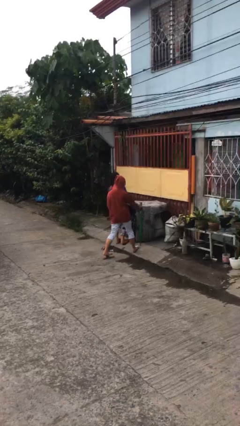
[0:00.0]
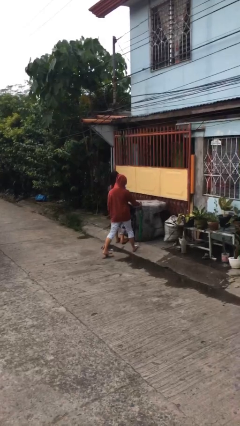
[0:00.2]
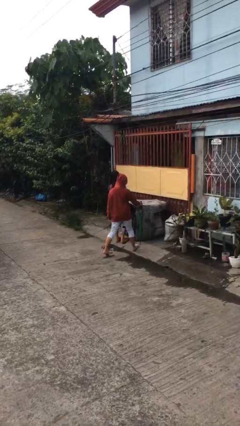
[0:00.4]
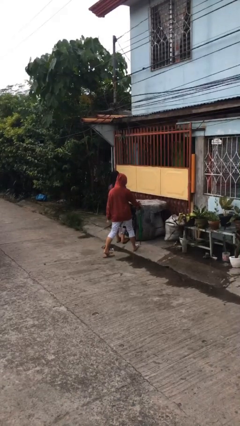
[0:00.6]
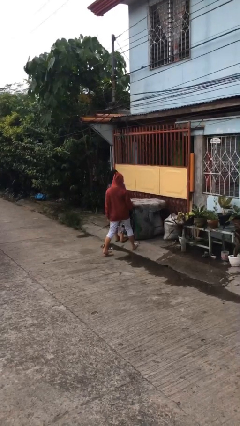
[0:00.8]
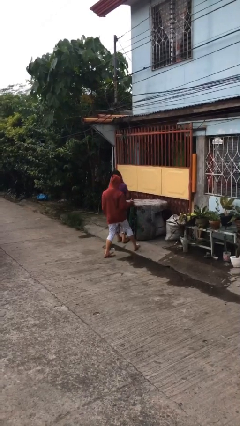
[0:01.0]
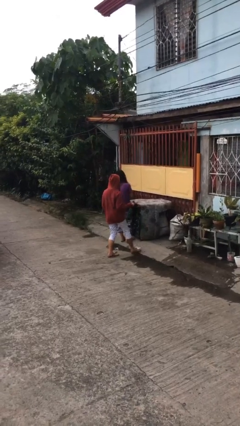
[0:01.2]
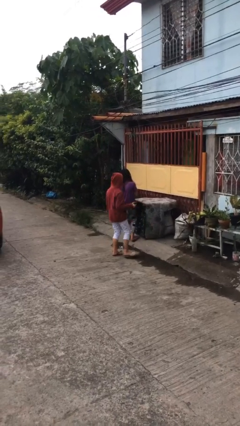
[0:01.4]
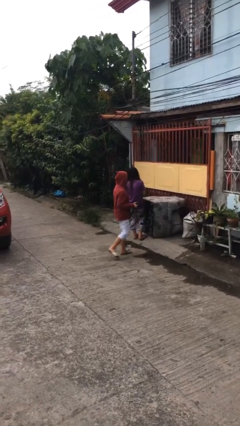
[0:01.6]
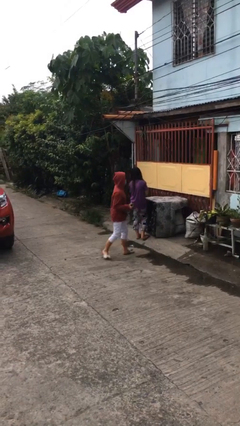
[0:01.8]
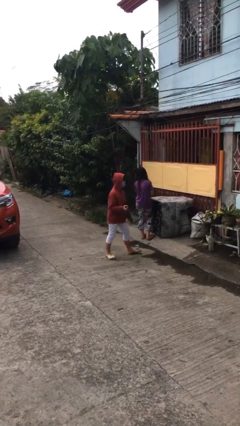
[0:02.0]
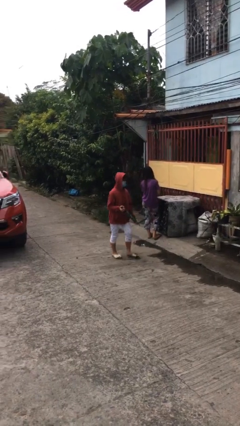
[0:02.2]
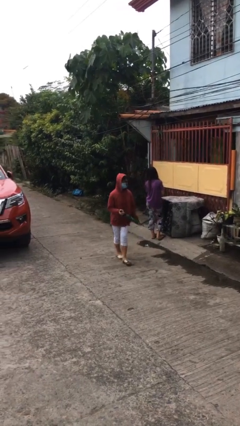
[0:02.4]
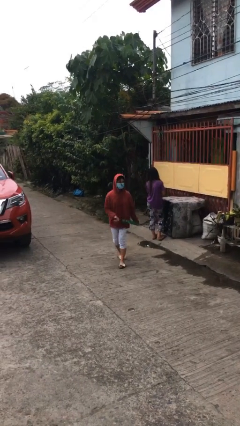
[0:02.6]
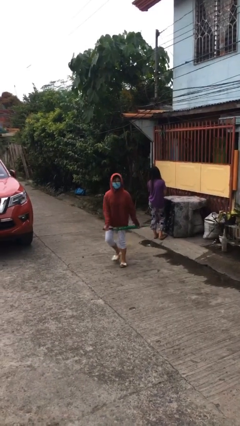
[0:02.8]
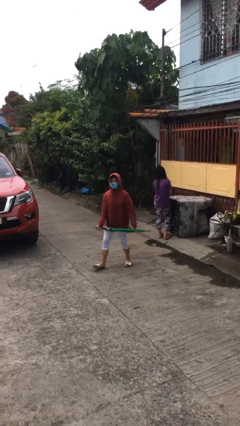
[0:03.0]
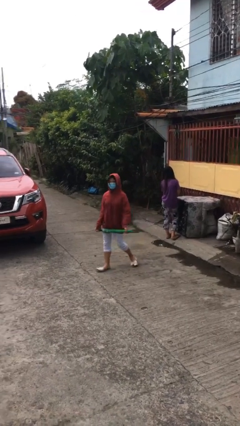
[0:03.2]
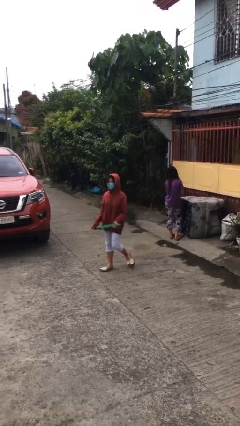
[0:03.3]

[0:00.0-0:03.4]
person steals object from person

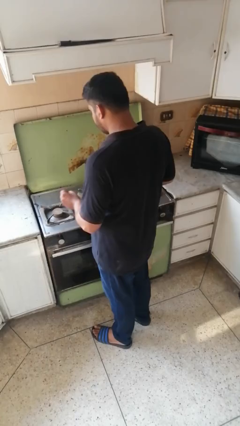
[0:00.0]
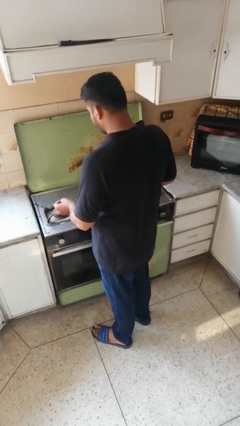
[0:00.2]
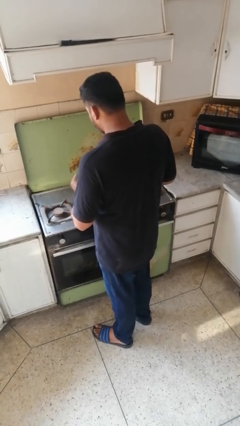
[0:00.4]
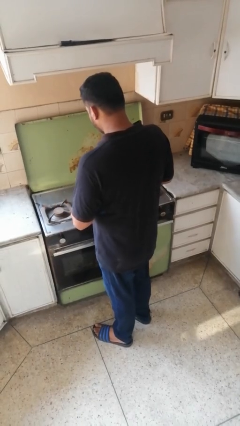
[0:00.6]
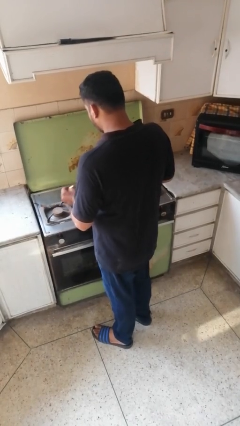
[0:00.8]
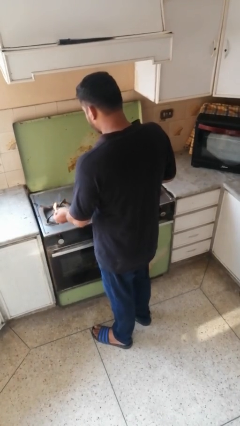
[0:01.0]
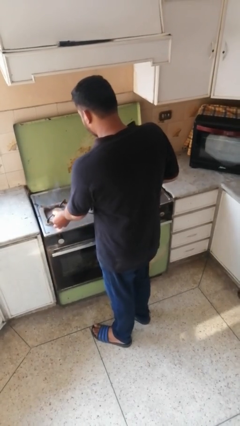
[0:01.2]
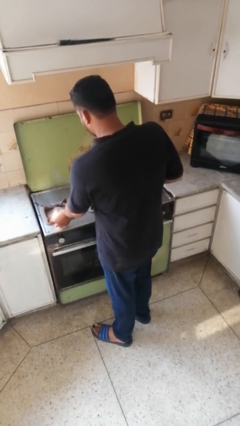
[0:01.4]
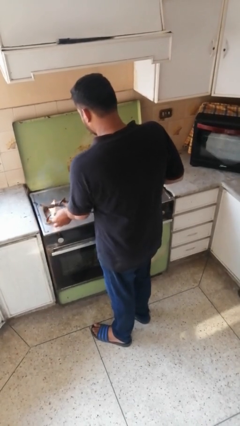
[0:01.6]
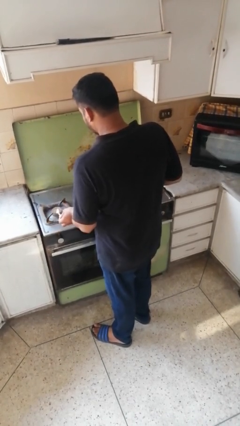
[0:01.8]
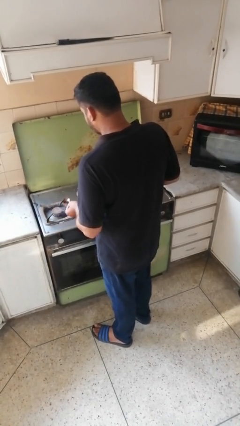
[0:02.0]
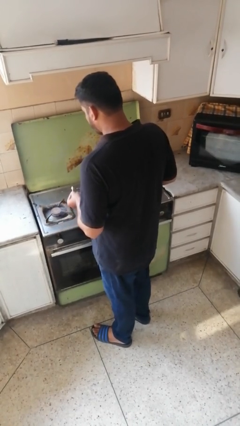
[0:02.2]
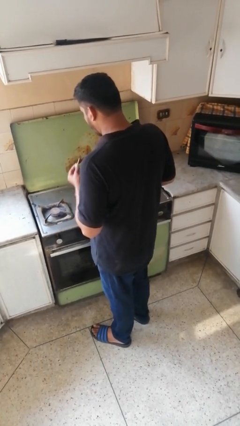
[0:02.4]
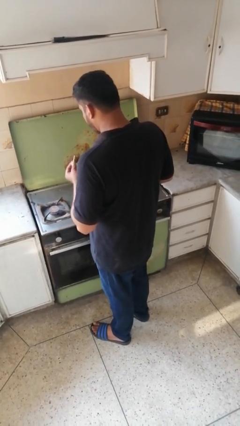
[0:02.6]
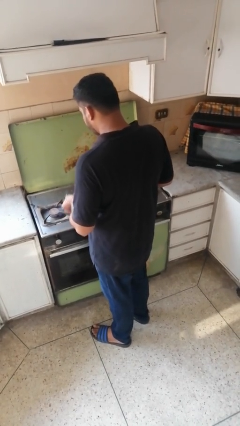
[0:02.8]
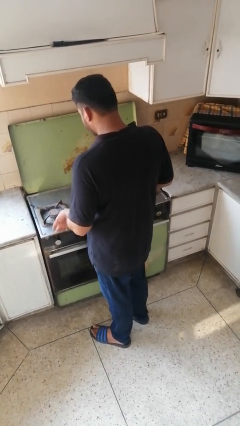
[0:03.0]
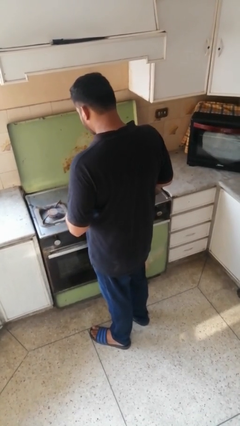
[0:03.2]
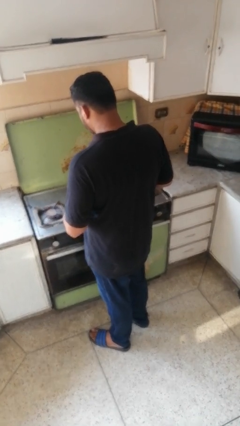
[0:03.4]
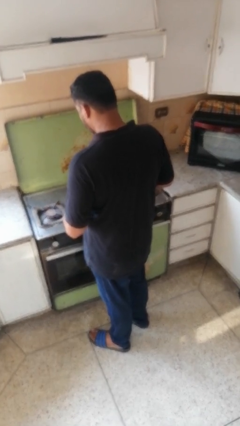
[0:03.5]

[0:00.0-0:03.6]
person turns on stovetop

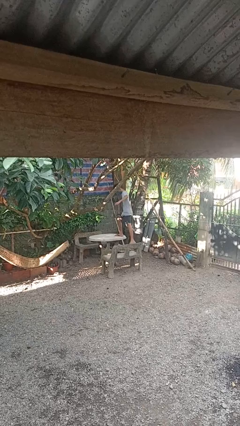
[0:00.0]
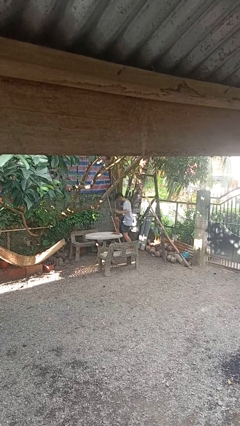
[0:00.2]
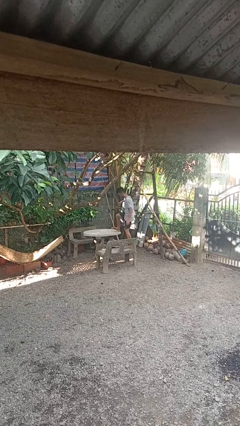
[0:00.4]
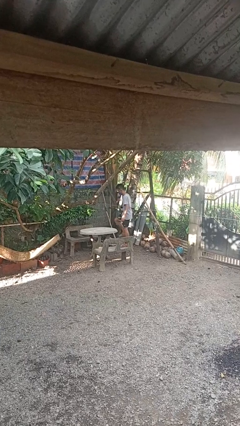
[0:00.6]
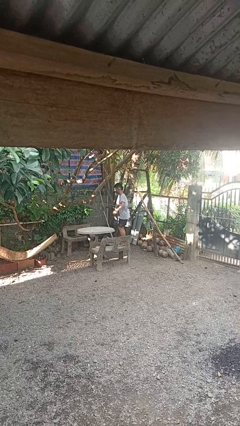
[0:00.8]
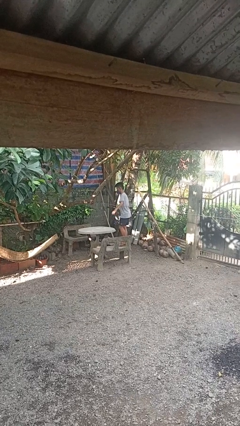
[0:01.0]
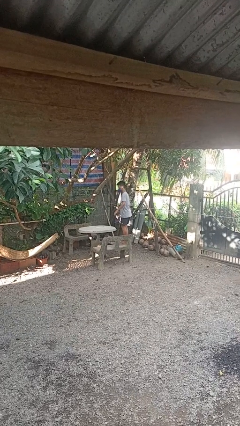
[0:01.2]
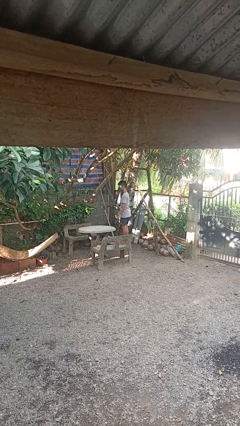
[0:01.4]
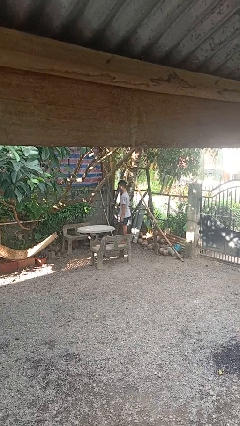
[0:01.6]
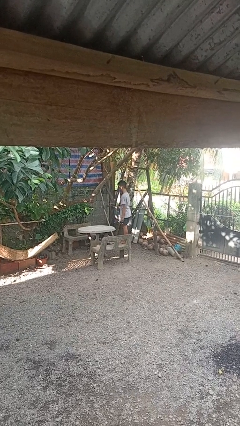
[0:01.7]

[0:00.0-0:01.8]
person climbs off table

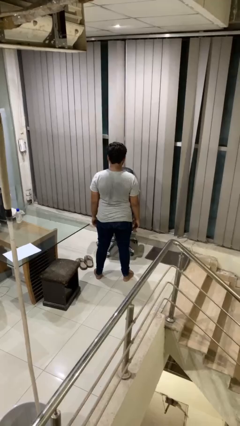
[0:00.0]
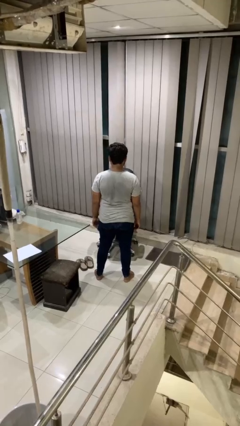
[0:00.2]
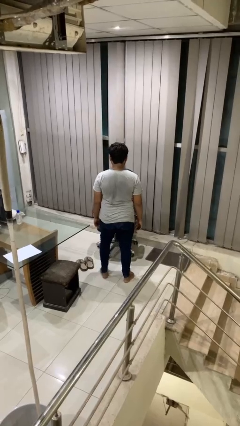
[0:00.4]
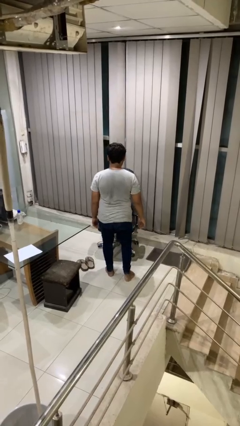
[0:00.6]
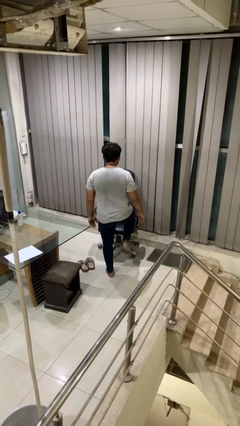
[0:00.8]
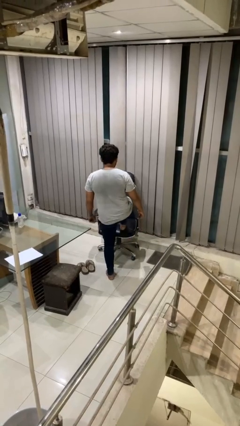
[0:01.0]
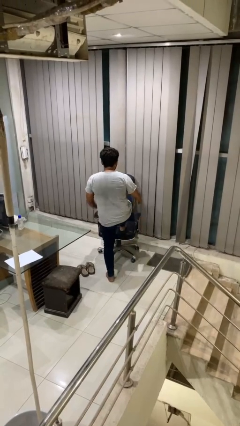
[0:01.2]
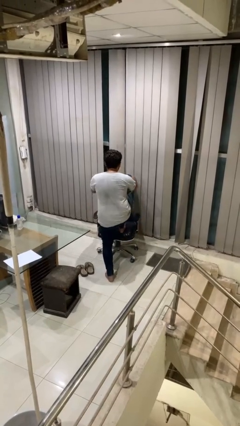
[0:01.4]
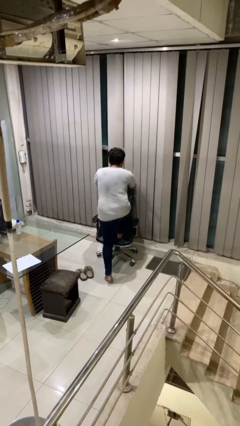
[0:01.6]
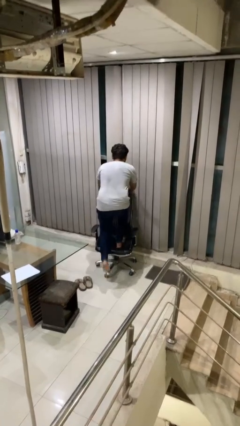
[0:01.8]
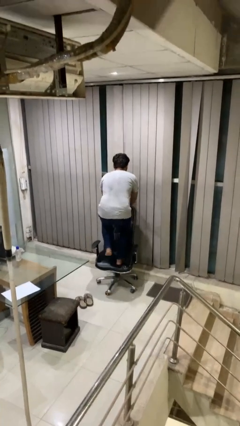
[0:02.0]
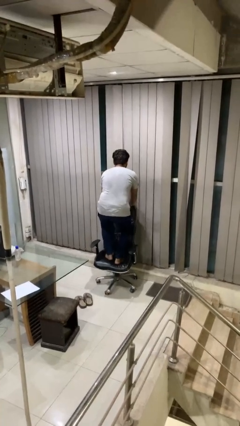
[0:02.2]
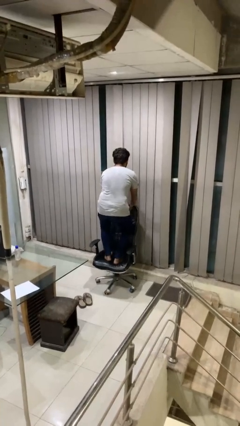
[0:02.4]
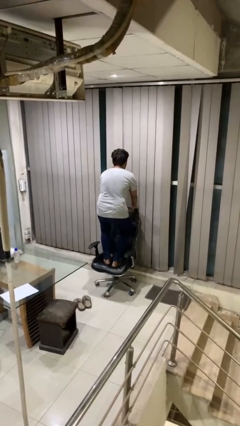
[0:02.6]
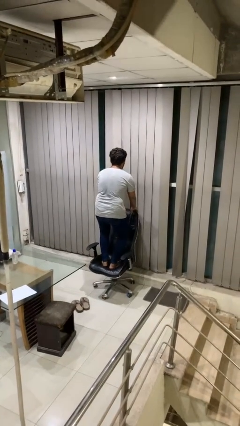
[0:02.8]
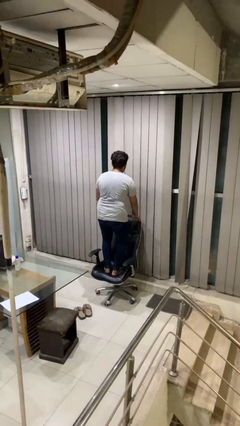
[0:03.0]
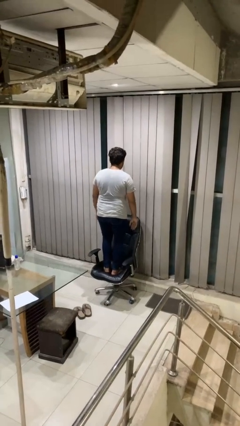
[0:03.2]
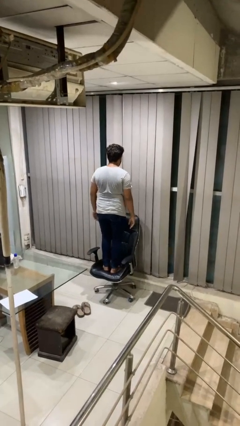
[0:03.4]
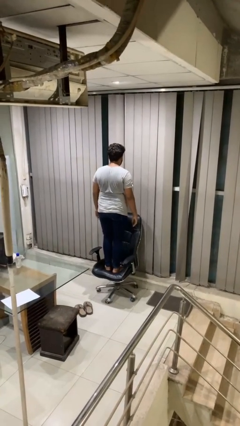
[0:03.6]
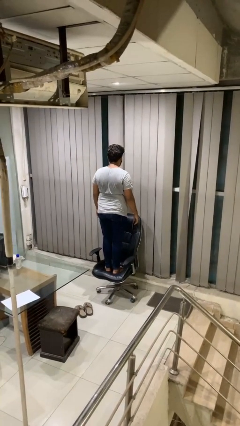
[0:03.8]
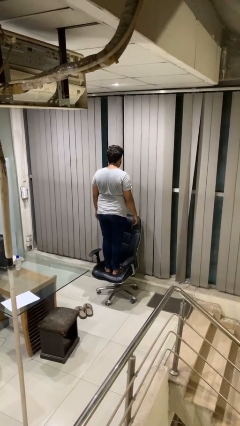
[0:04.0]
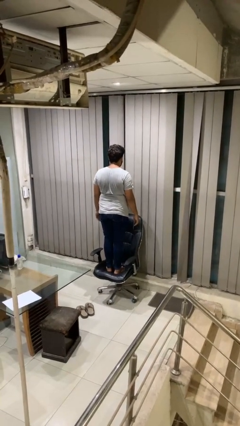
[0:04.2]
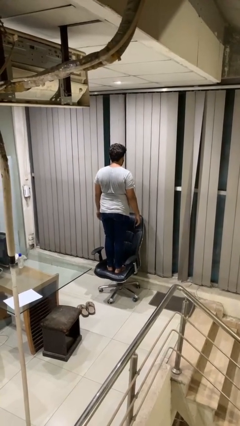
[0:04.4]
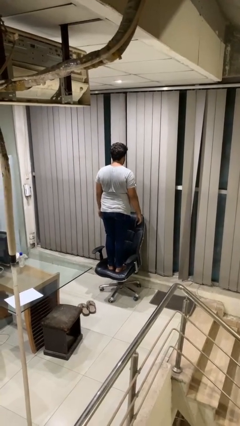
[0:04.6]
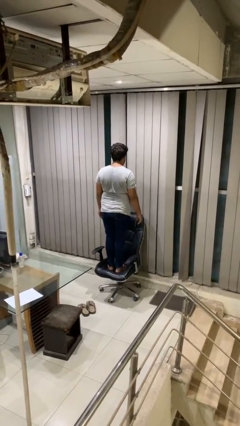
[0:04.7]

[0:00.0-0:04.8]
person climbs on chair

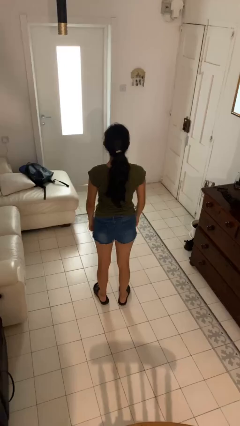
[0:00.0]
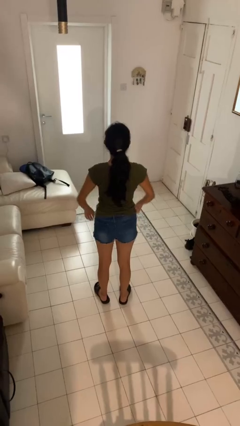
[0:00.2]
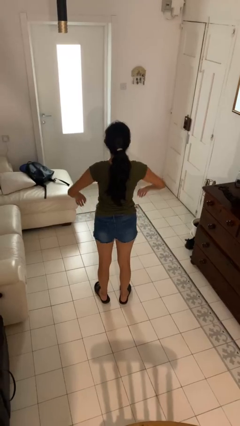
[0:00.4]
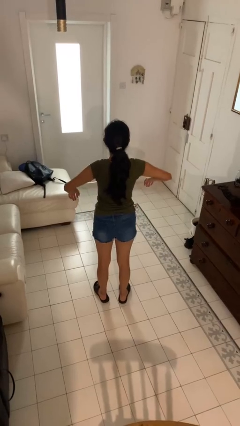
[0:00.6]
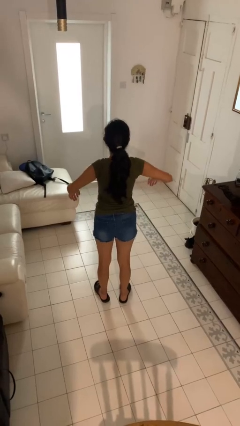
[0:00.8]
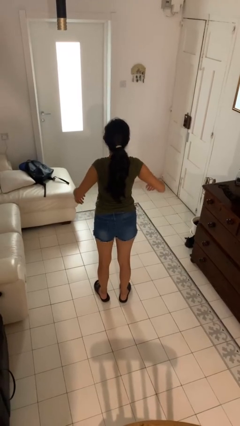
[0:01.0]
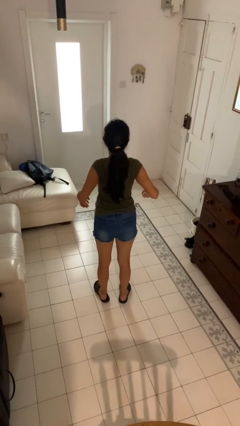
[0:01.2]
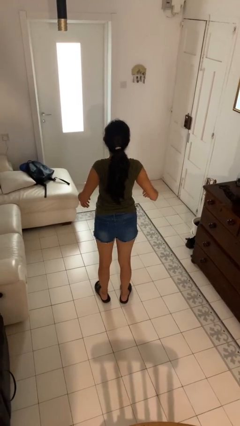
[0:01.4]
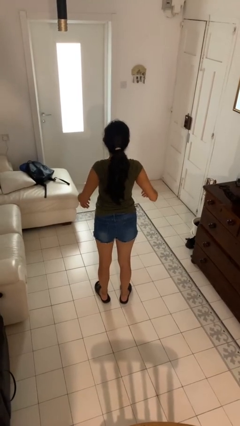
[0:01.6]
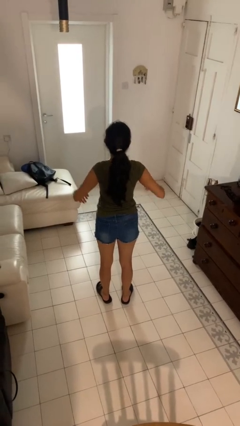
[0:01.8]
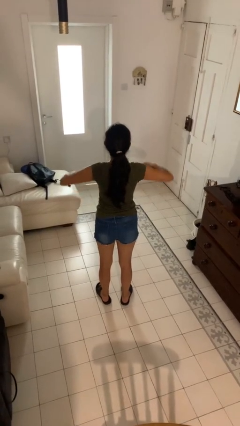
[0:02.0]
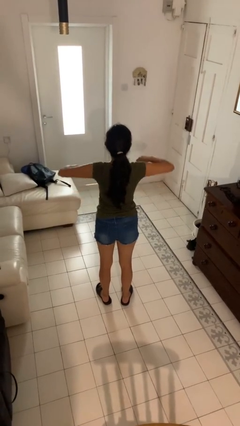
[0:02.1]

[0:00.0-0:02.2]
person stretches back

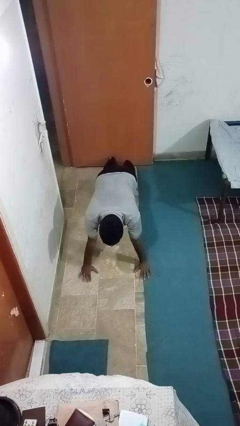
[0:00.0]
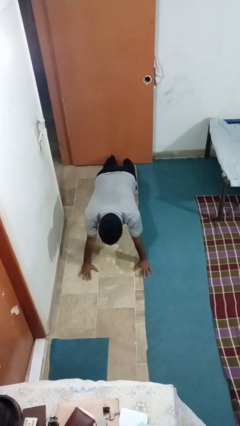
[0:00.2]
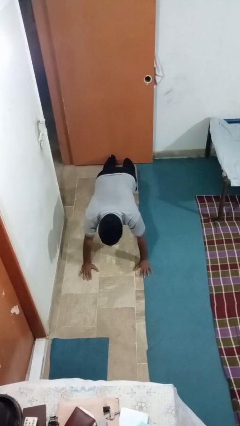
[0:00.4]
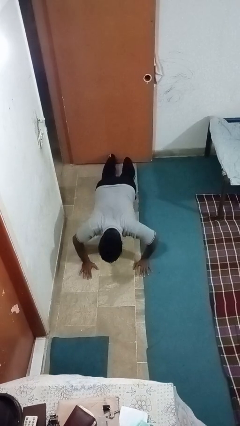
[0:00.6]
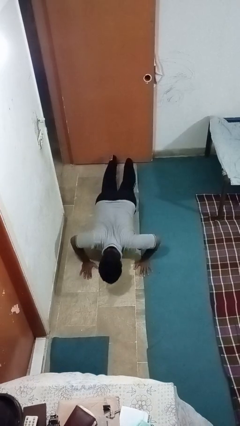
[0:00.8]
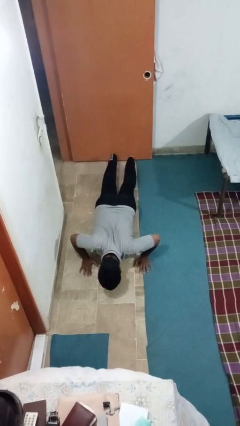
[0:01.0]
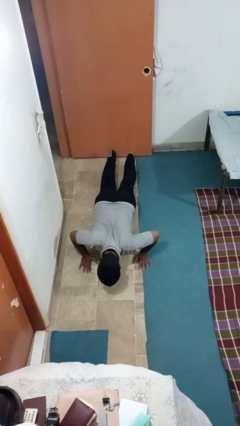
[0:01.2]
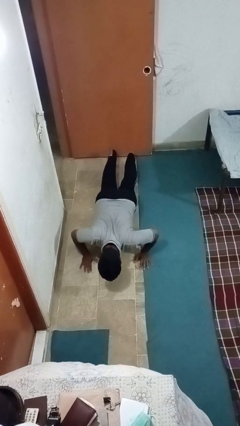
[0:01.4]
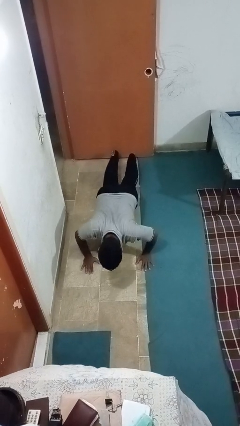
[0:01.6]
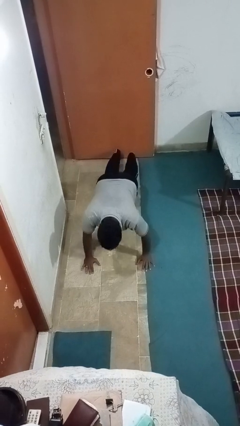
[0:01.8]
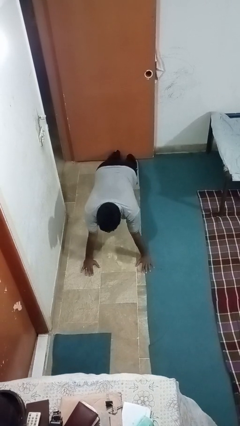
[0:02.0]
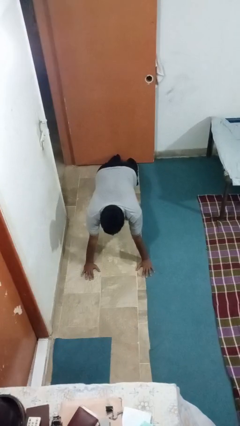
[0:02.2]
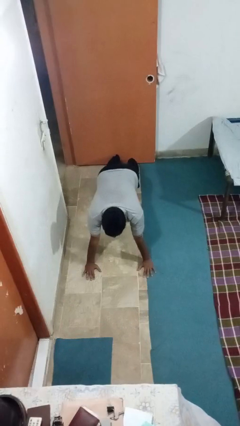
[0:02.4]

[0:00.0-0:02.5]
person exercises with pushup
